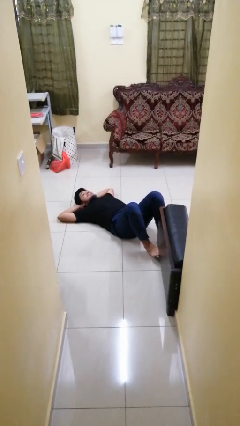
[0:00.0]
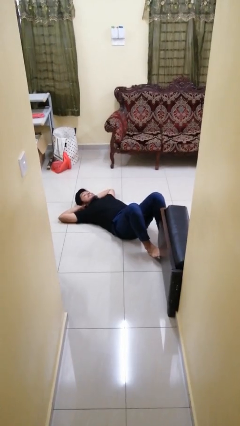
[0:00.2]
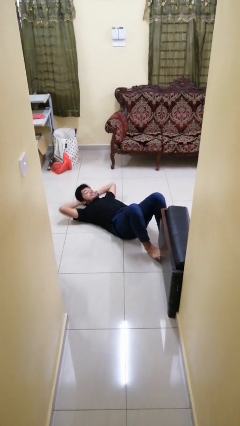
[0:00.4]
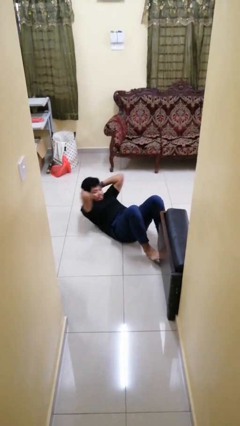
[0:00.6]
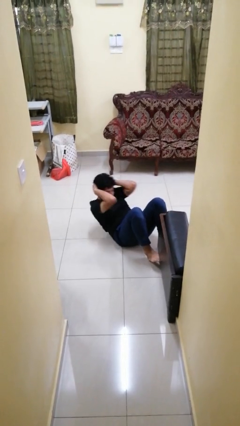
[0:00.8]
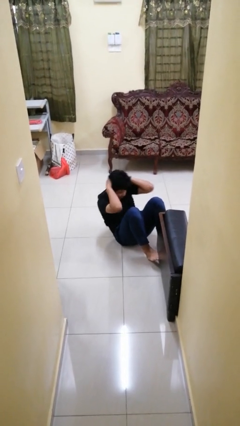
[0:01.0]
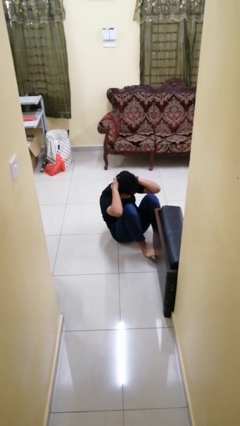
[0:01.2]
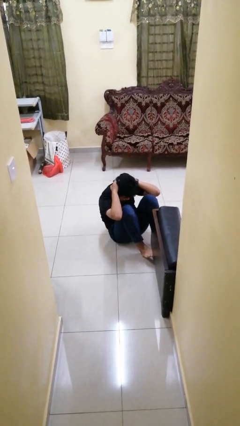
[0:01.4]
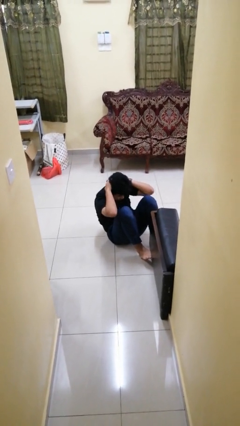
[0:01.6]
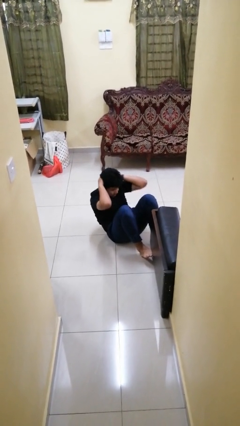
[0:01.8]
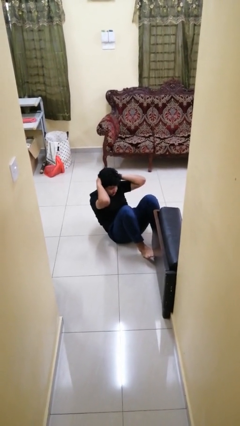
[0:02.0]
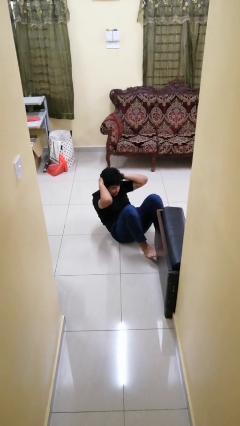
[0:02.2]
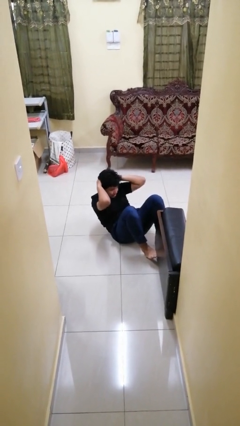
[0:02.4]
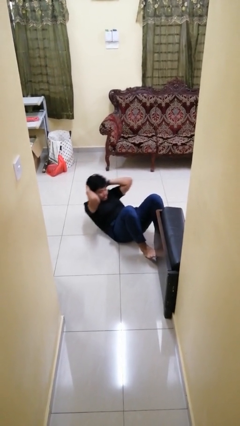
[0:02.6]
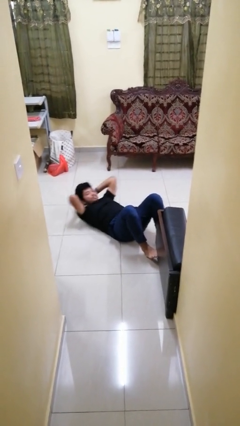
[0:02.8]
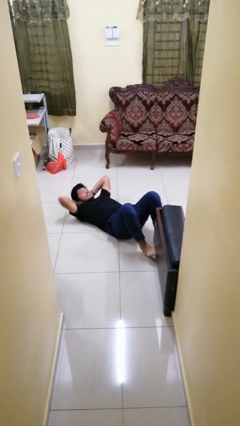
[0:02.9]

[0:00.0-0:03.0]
person exercises with situp

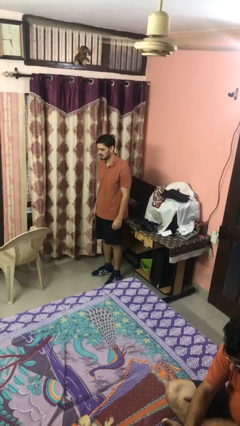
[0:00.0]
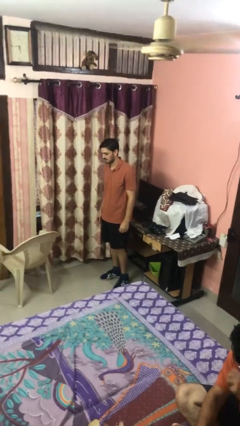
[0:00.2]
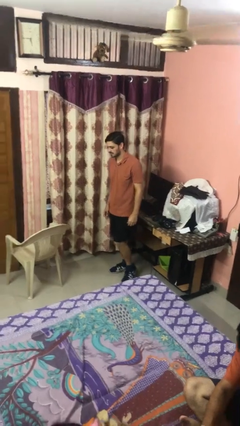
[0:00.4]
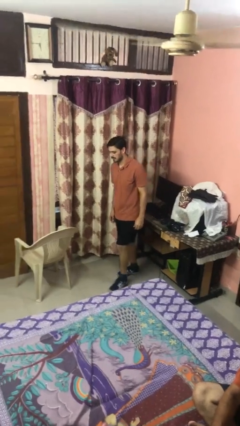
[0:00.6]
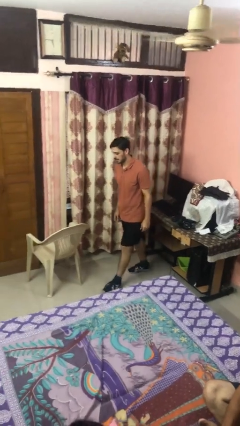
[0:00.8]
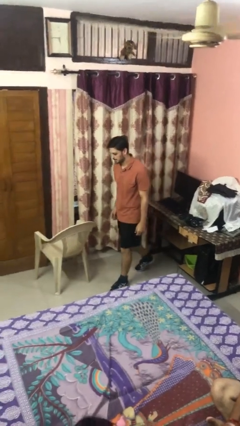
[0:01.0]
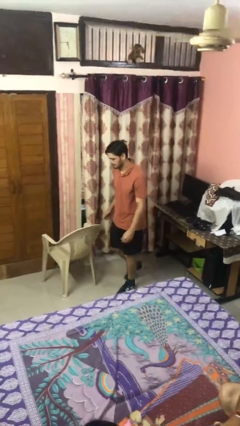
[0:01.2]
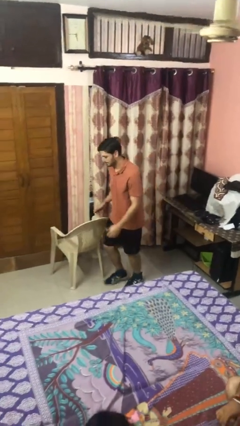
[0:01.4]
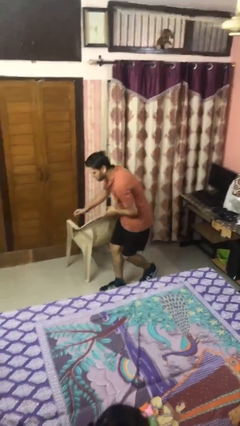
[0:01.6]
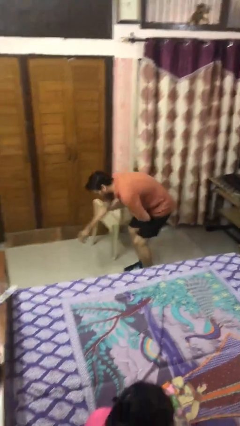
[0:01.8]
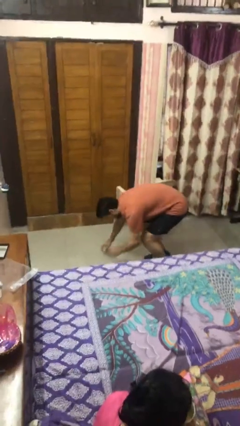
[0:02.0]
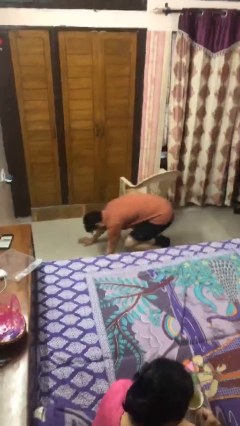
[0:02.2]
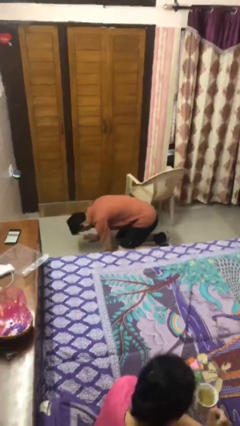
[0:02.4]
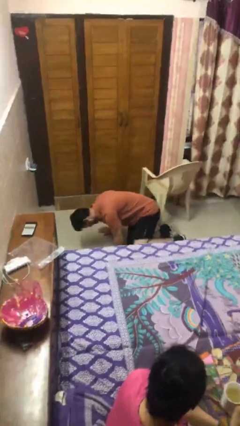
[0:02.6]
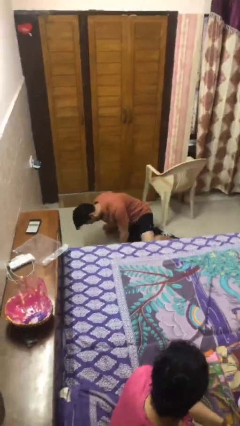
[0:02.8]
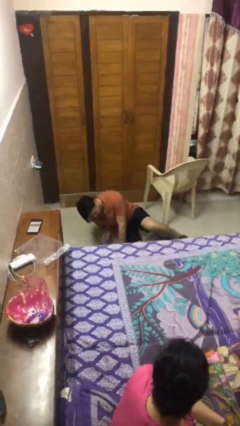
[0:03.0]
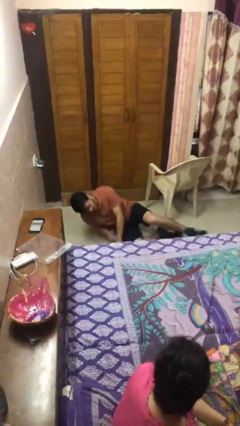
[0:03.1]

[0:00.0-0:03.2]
person trips on object on floor

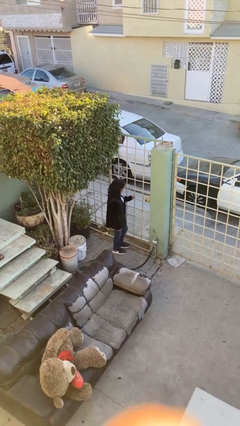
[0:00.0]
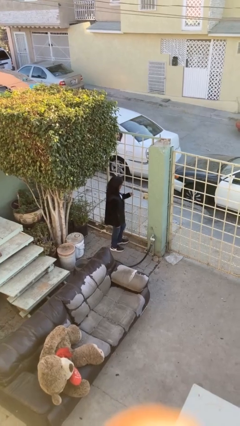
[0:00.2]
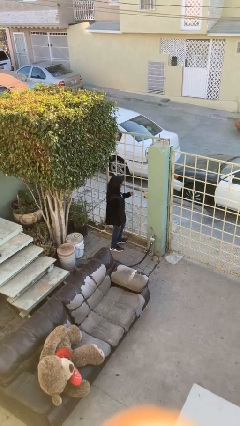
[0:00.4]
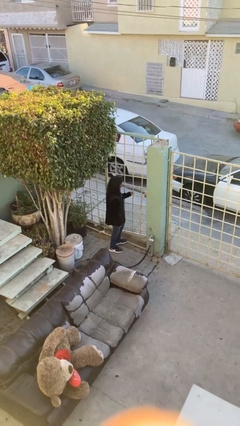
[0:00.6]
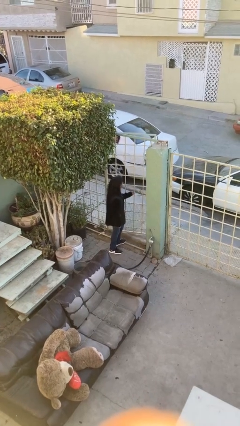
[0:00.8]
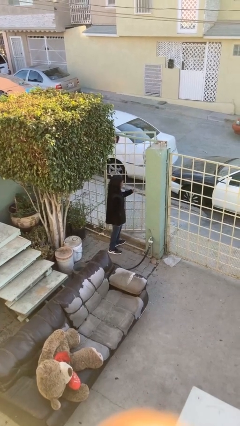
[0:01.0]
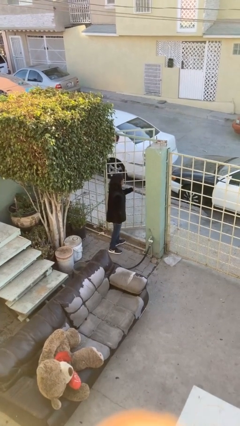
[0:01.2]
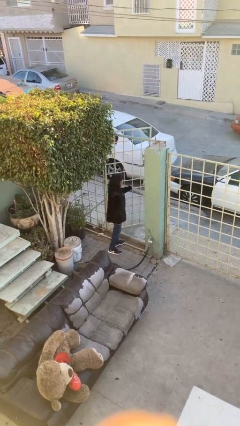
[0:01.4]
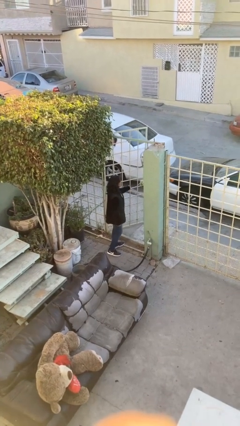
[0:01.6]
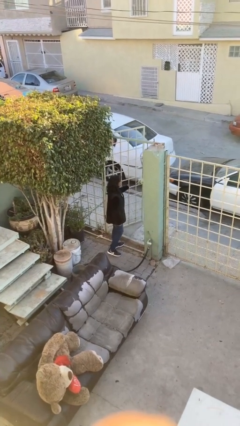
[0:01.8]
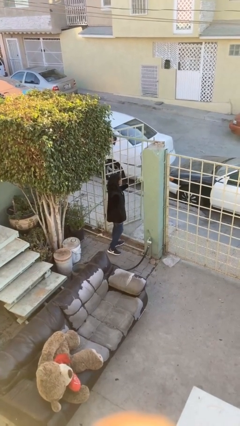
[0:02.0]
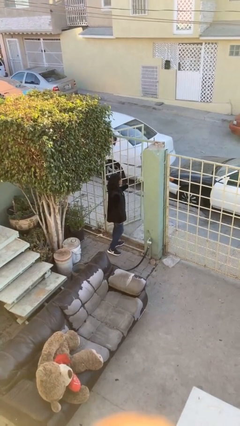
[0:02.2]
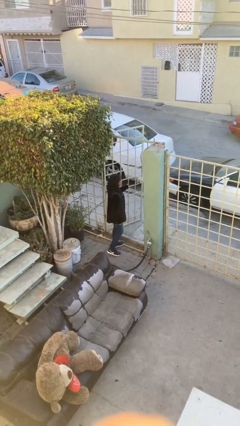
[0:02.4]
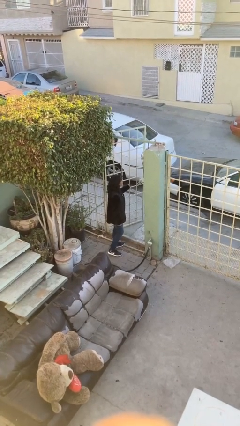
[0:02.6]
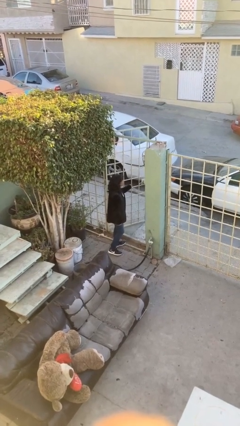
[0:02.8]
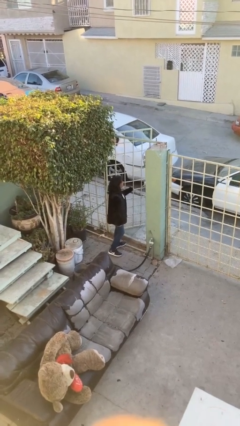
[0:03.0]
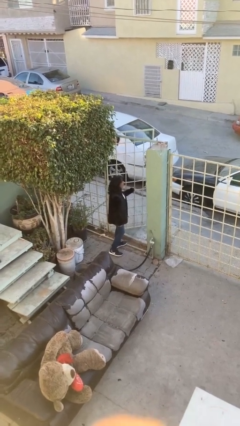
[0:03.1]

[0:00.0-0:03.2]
person opens facility door

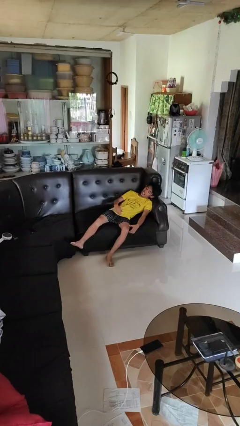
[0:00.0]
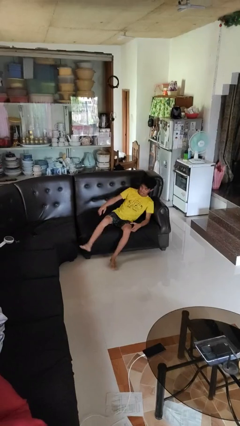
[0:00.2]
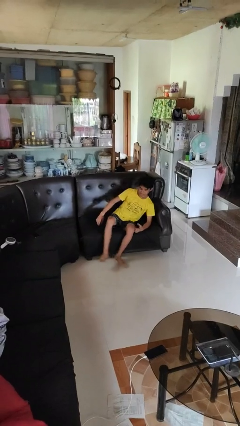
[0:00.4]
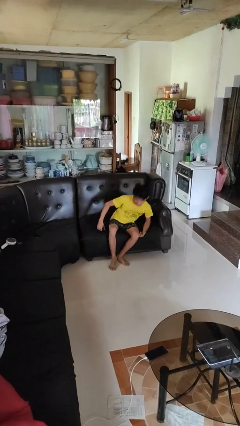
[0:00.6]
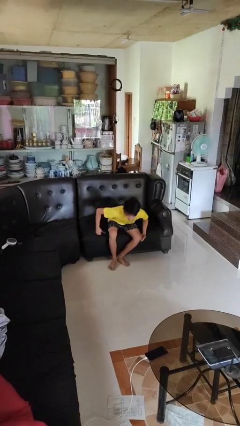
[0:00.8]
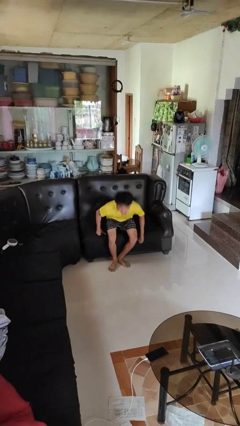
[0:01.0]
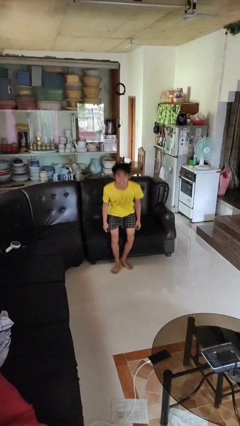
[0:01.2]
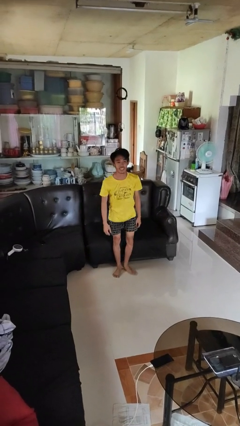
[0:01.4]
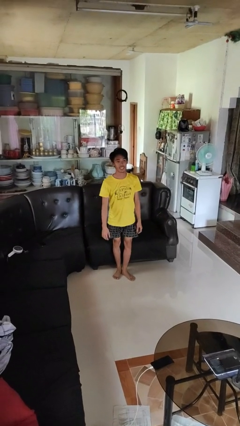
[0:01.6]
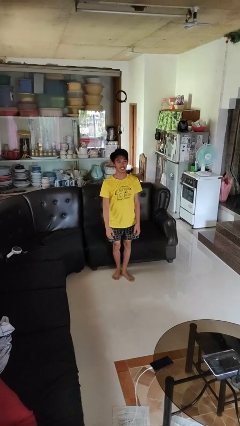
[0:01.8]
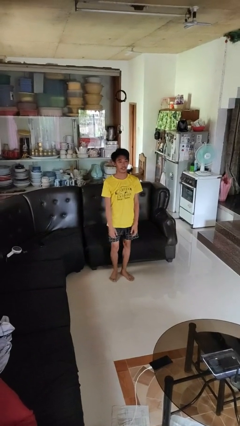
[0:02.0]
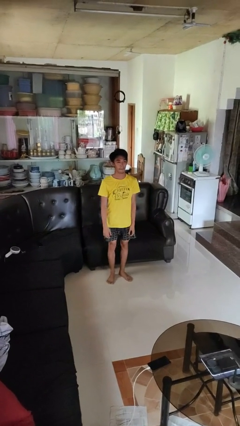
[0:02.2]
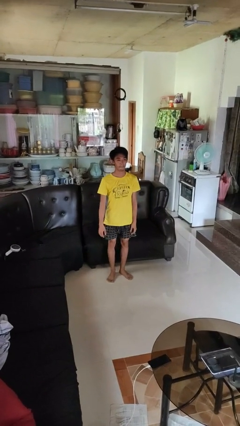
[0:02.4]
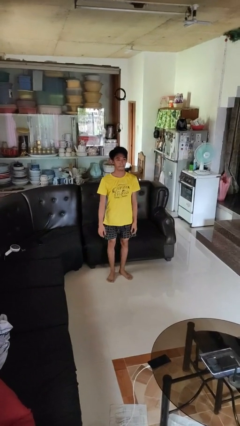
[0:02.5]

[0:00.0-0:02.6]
person stands up

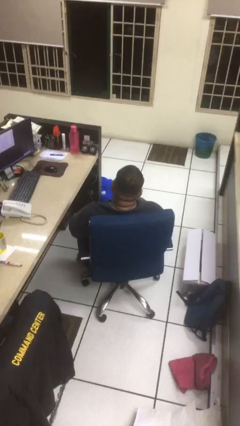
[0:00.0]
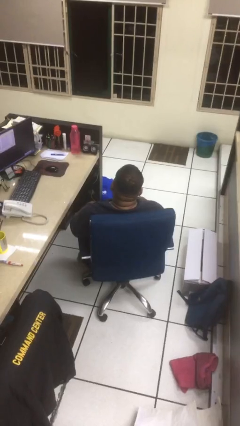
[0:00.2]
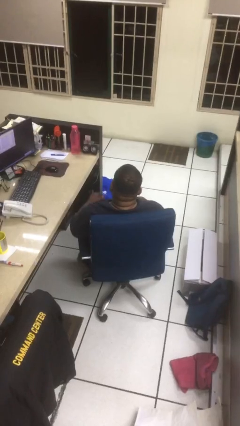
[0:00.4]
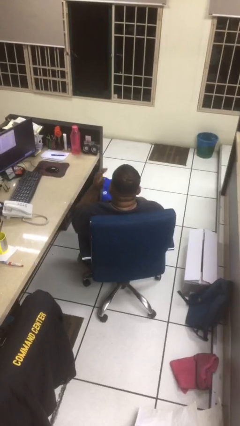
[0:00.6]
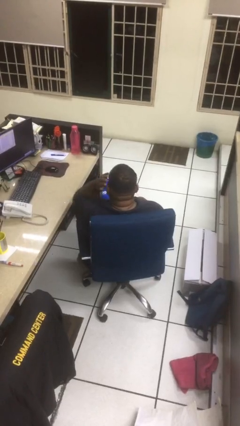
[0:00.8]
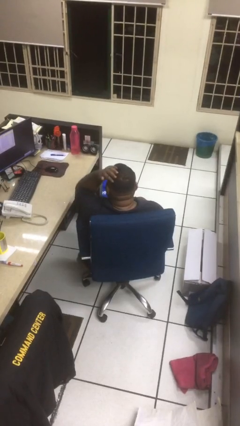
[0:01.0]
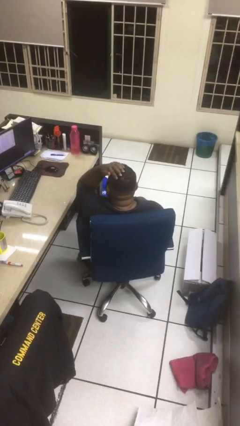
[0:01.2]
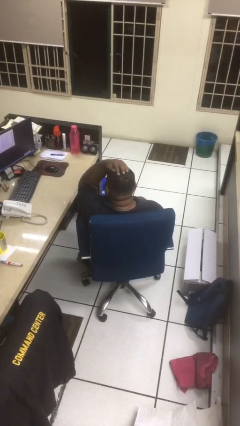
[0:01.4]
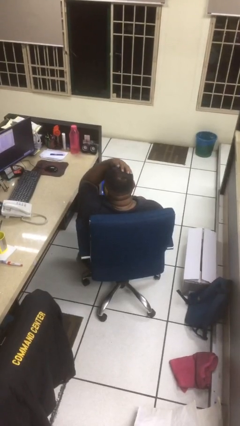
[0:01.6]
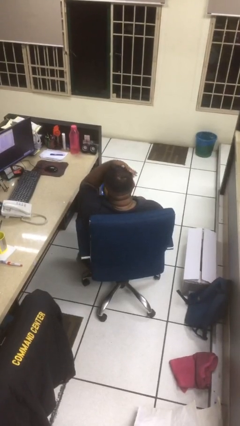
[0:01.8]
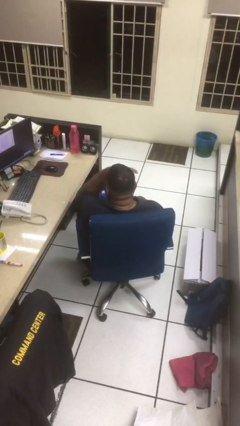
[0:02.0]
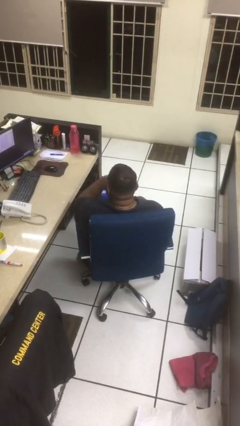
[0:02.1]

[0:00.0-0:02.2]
person strokes hair

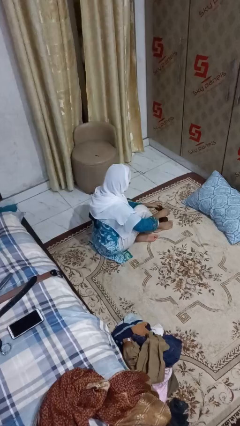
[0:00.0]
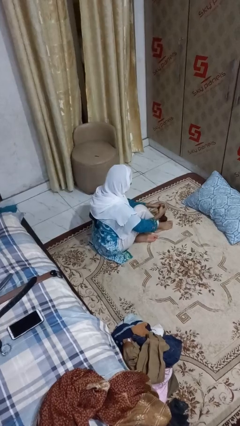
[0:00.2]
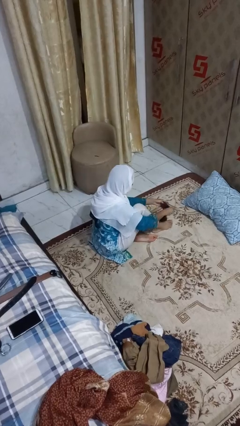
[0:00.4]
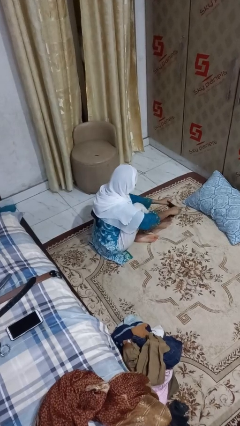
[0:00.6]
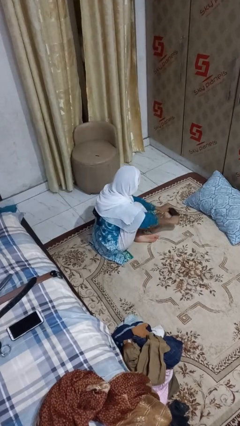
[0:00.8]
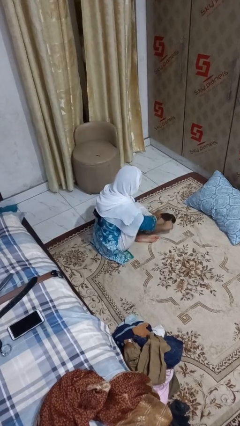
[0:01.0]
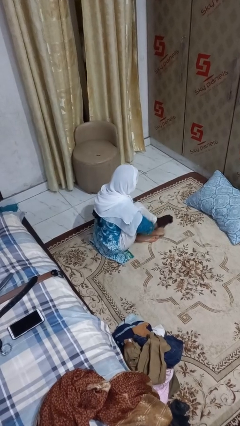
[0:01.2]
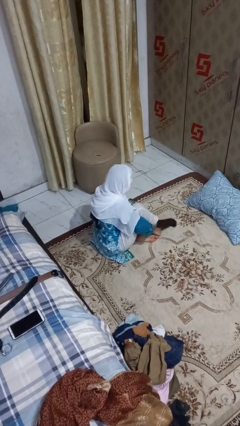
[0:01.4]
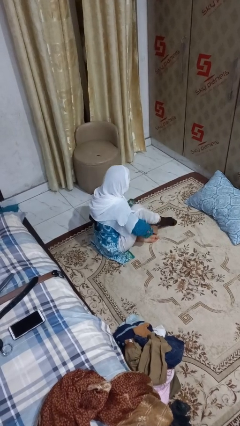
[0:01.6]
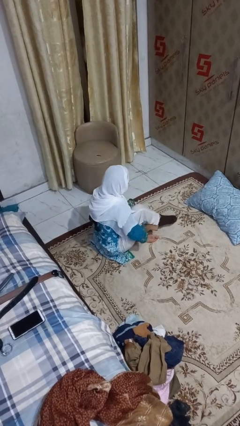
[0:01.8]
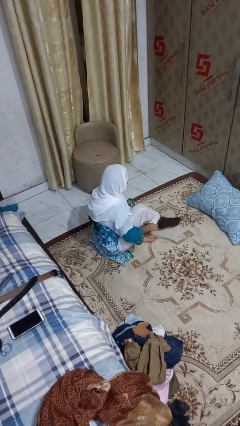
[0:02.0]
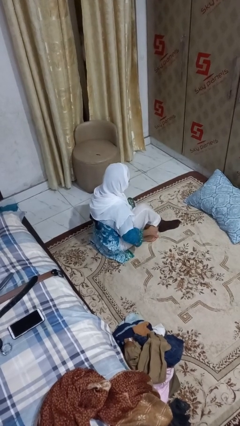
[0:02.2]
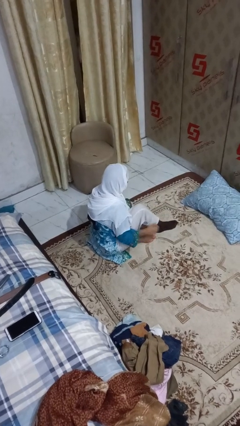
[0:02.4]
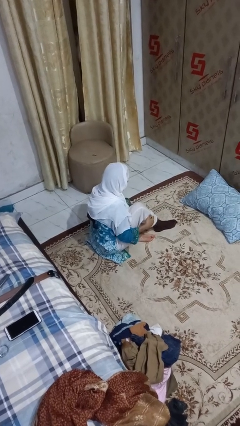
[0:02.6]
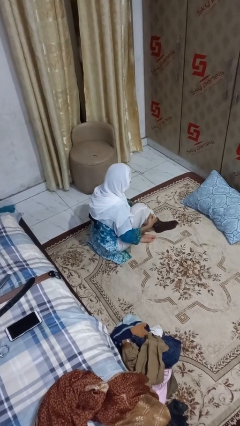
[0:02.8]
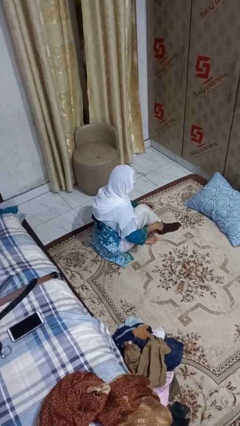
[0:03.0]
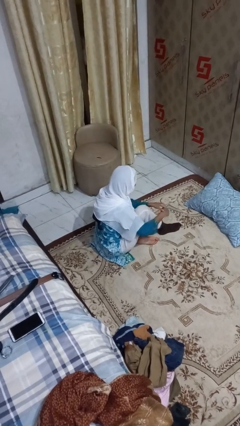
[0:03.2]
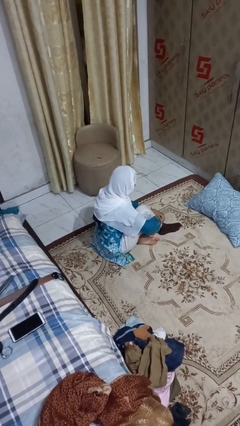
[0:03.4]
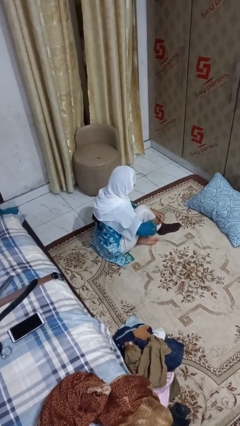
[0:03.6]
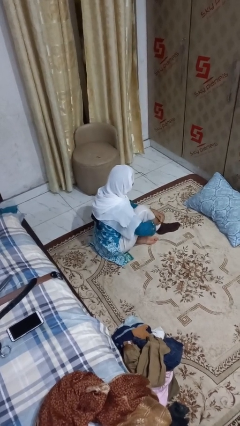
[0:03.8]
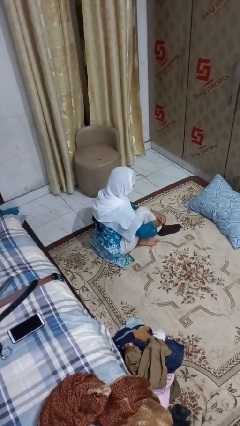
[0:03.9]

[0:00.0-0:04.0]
person puts on socks
